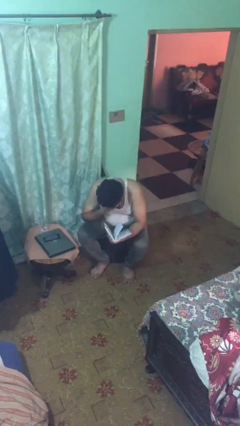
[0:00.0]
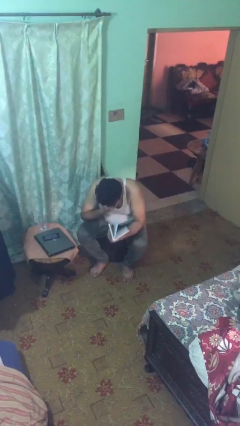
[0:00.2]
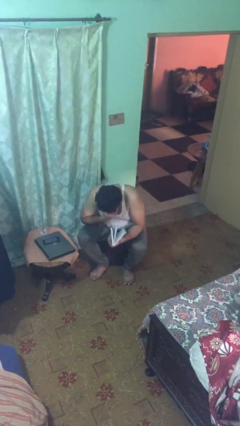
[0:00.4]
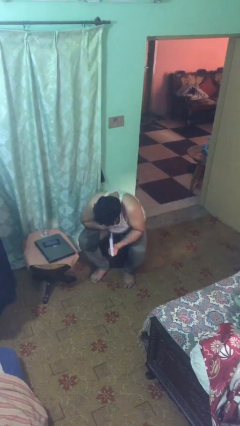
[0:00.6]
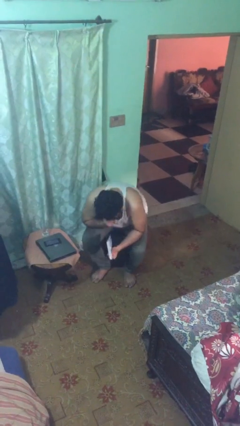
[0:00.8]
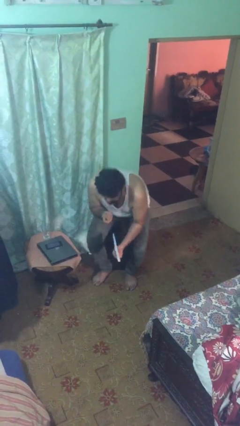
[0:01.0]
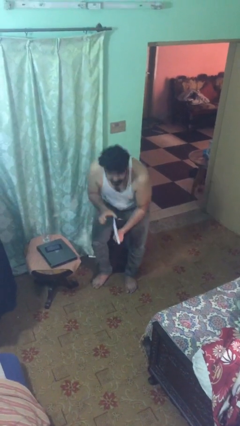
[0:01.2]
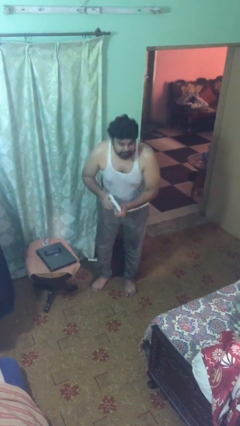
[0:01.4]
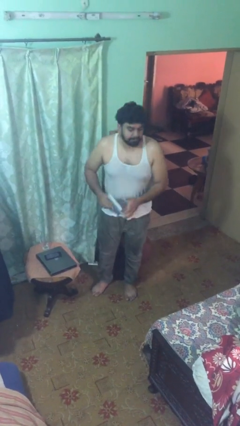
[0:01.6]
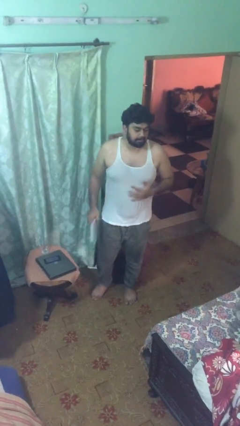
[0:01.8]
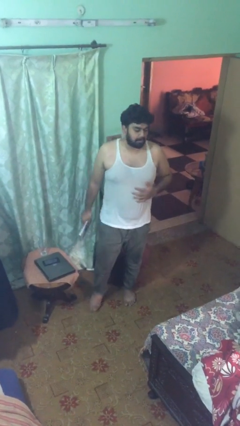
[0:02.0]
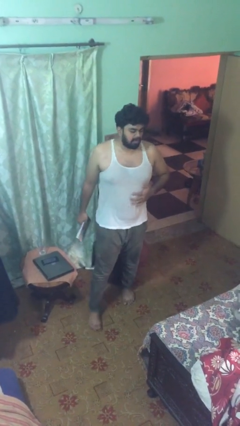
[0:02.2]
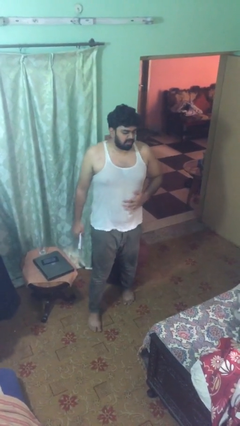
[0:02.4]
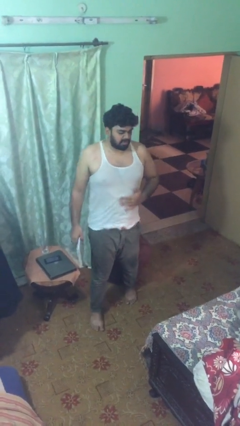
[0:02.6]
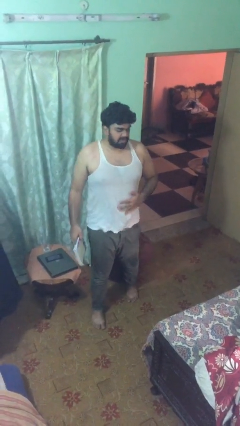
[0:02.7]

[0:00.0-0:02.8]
person stands up

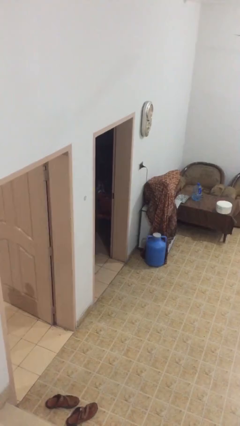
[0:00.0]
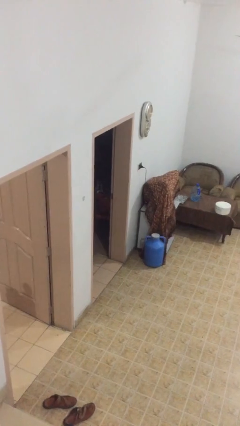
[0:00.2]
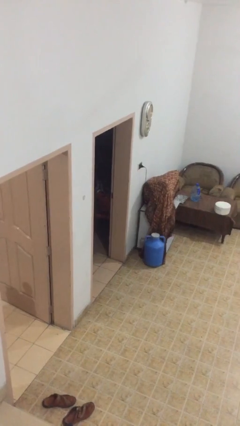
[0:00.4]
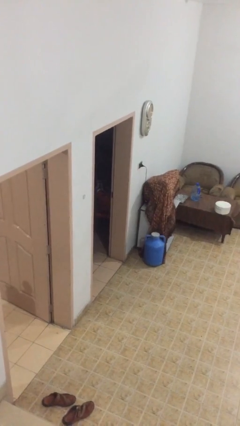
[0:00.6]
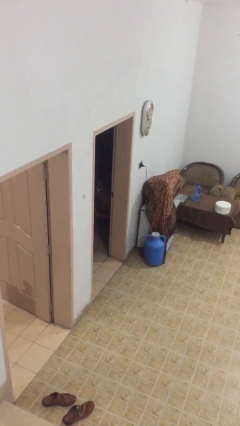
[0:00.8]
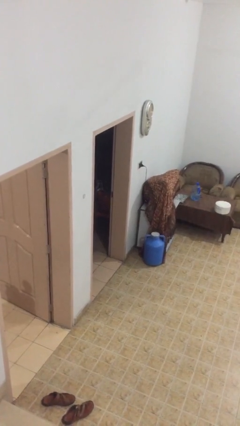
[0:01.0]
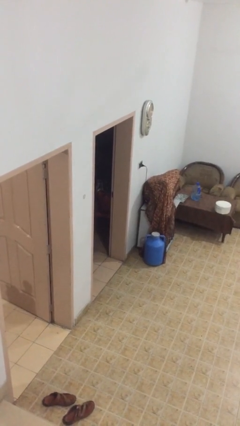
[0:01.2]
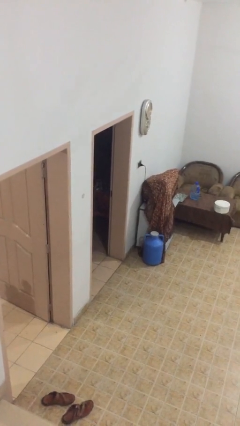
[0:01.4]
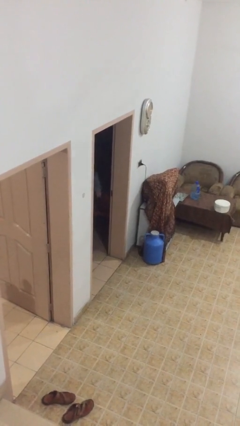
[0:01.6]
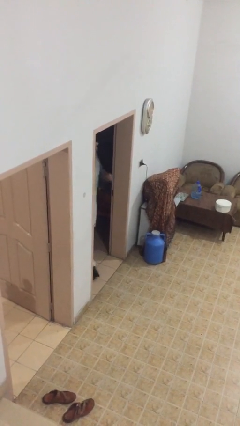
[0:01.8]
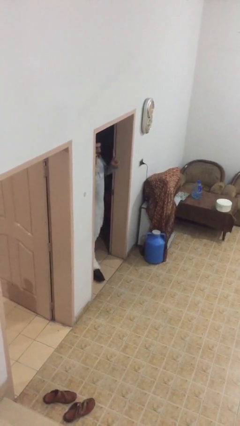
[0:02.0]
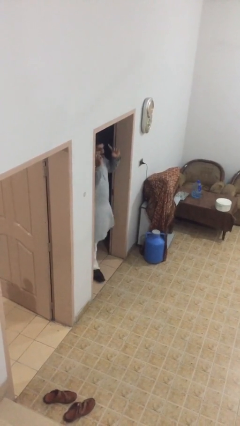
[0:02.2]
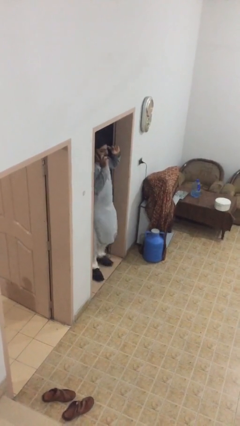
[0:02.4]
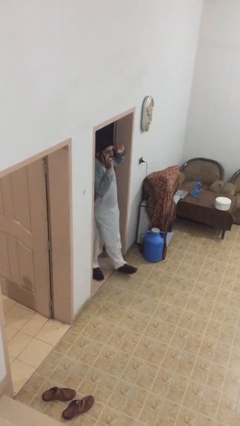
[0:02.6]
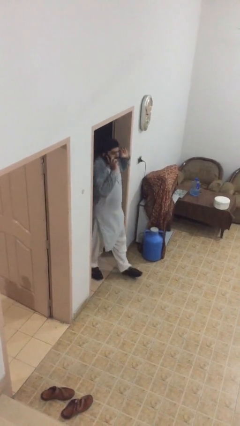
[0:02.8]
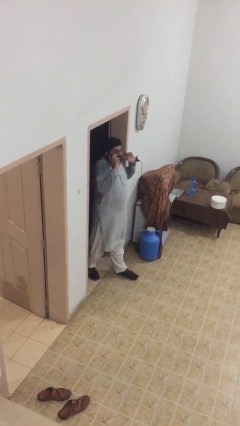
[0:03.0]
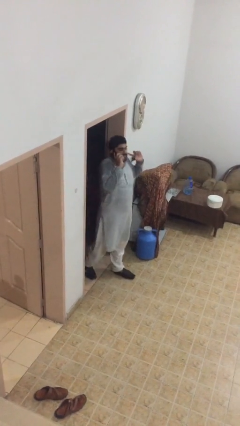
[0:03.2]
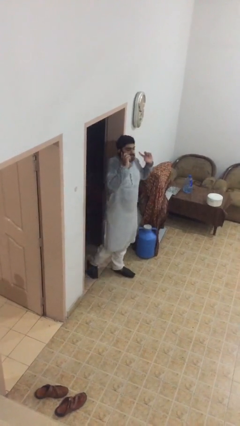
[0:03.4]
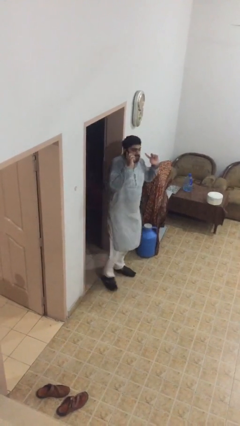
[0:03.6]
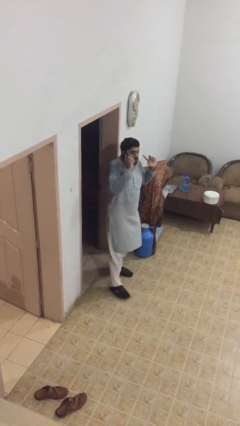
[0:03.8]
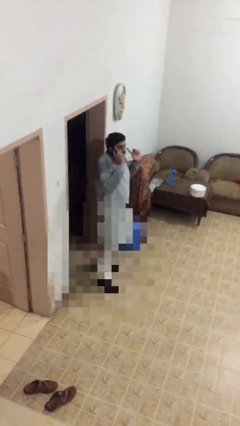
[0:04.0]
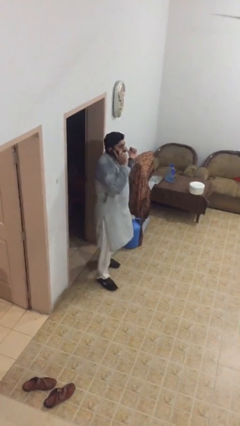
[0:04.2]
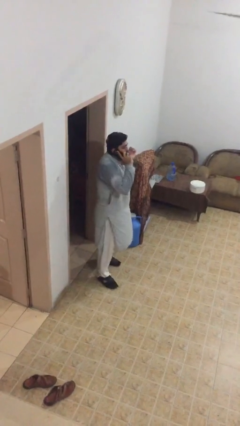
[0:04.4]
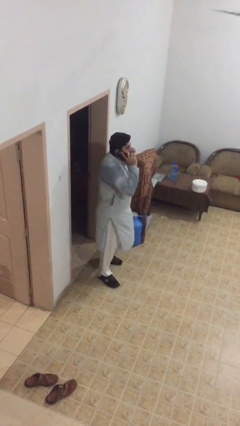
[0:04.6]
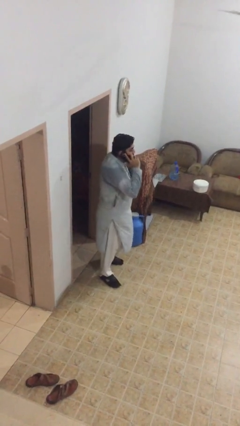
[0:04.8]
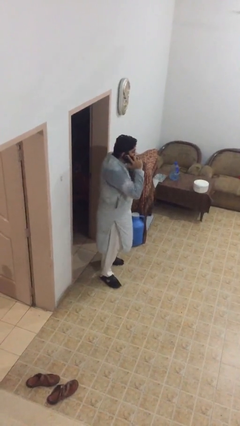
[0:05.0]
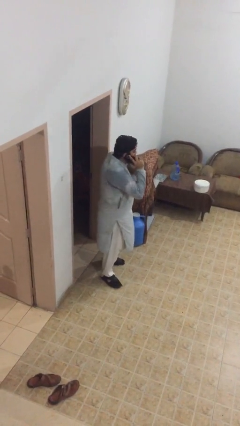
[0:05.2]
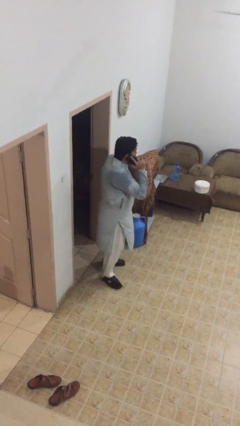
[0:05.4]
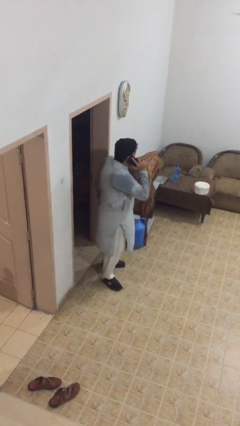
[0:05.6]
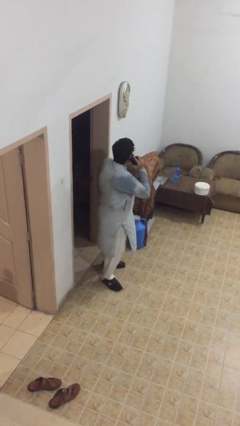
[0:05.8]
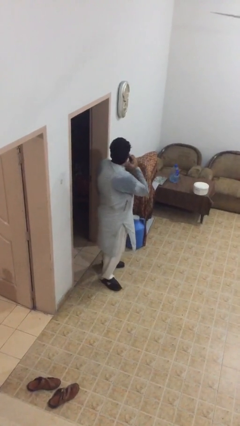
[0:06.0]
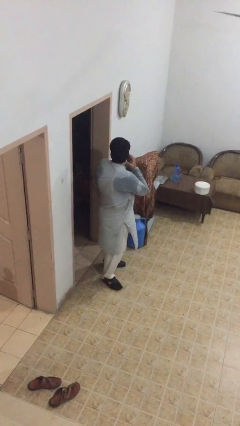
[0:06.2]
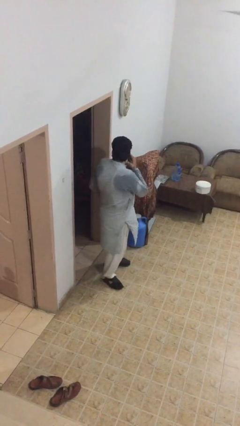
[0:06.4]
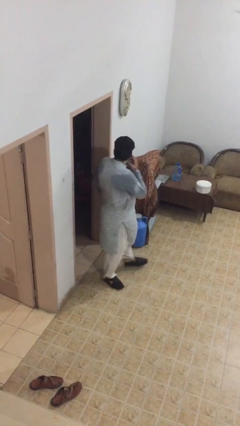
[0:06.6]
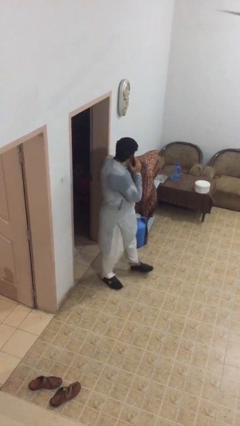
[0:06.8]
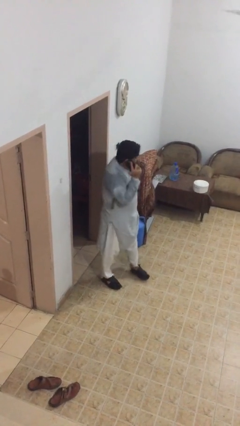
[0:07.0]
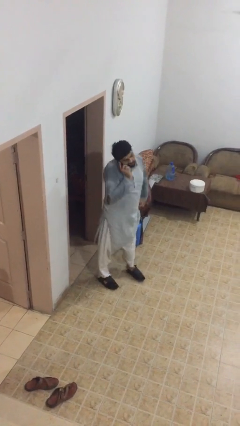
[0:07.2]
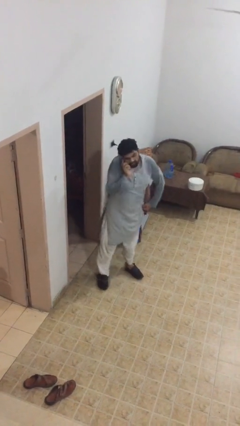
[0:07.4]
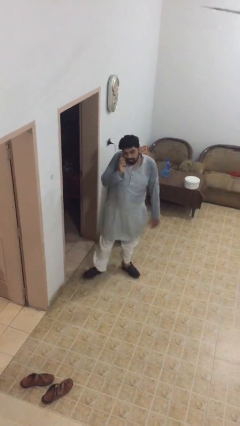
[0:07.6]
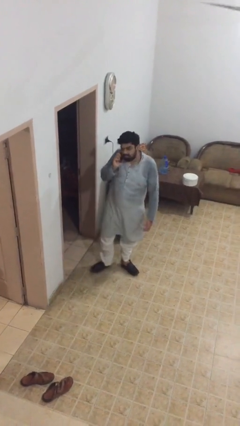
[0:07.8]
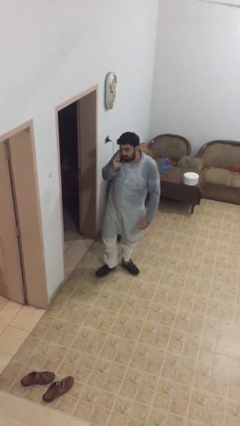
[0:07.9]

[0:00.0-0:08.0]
person enters scene through structure

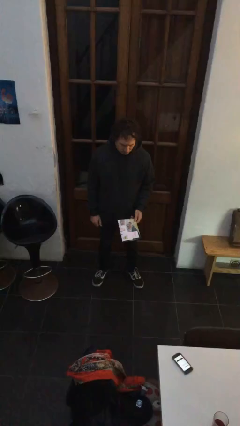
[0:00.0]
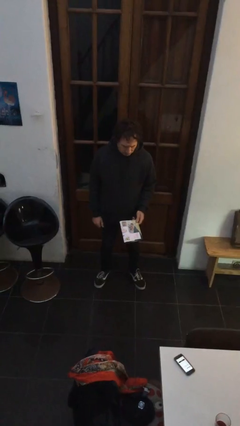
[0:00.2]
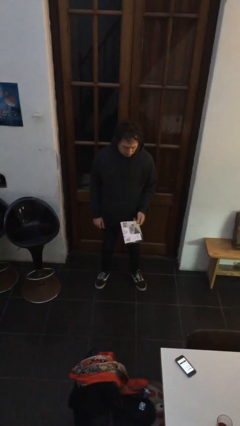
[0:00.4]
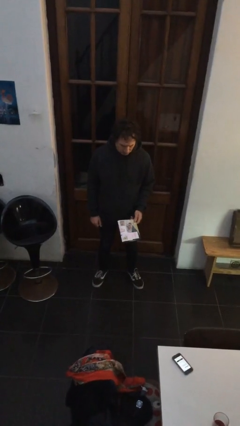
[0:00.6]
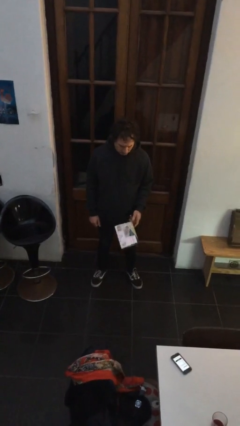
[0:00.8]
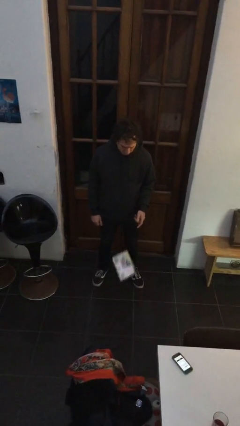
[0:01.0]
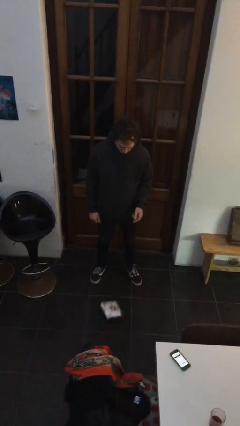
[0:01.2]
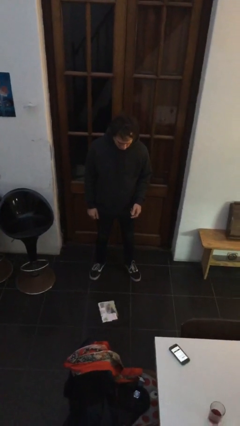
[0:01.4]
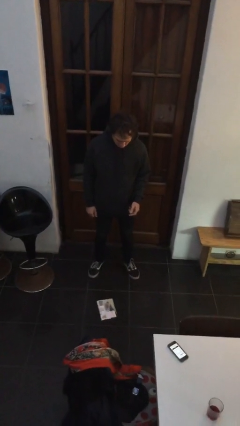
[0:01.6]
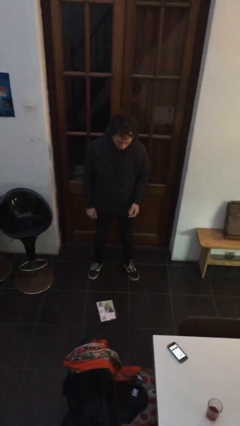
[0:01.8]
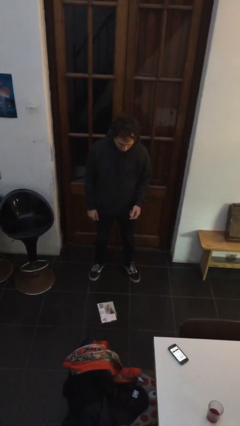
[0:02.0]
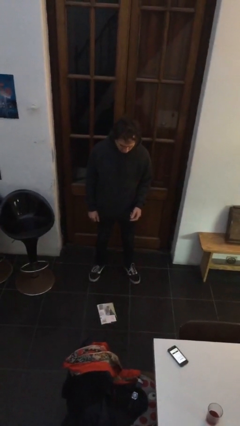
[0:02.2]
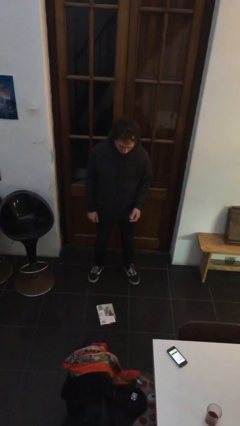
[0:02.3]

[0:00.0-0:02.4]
person drops object

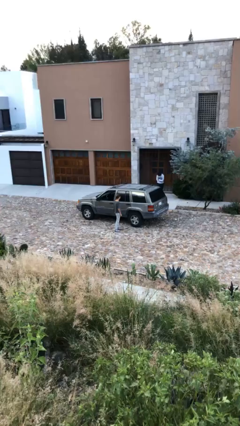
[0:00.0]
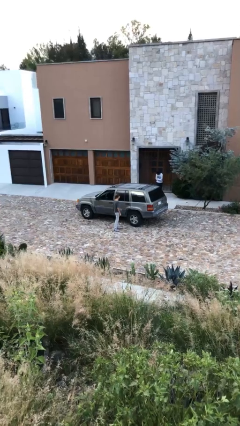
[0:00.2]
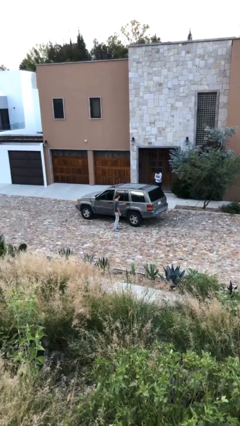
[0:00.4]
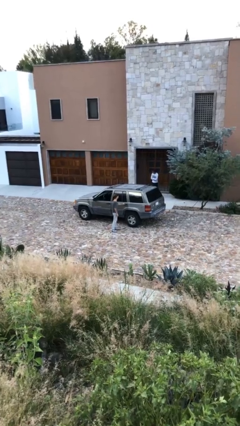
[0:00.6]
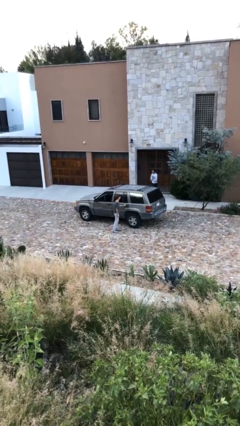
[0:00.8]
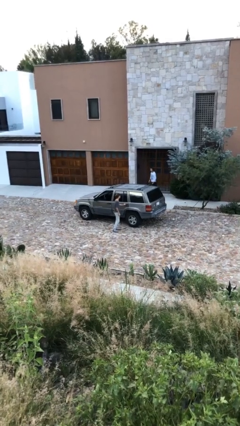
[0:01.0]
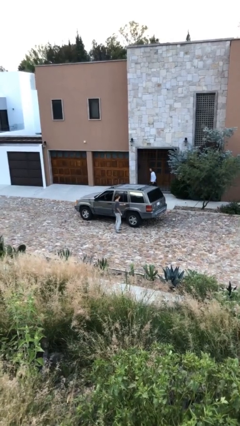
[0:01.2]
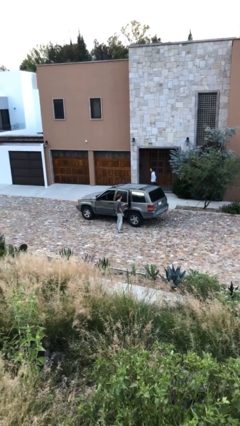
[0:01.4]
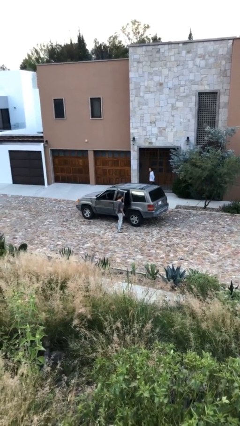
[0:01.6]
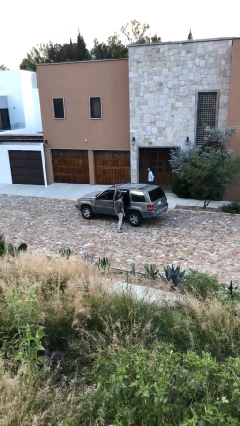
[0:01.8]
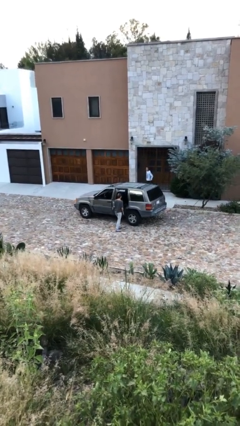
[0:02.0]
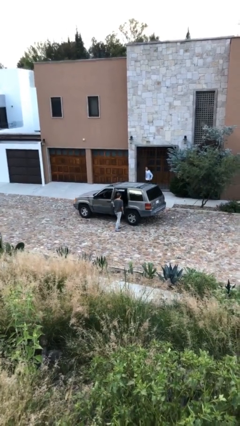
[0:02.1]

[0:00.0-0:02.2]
person opens car door

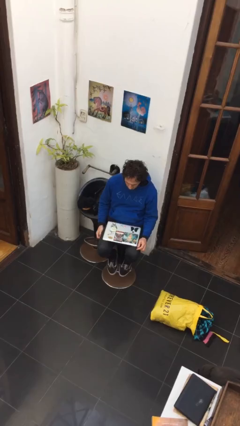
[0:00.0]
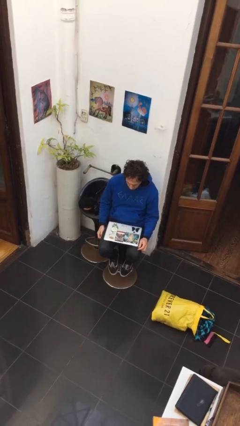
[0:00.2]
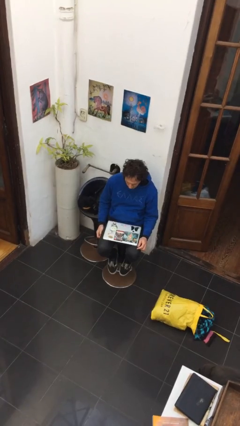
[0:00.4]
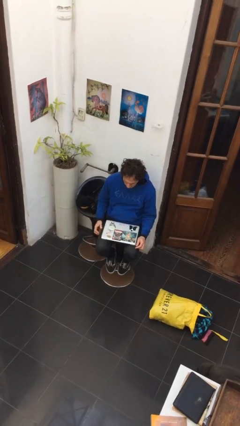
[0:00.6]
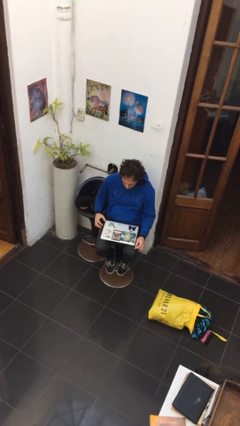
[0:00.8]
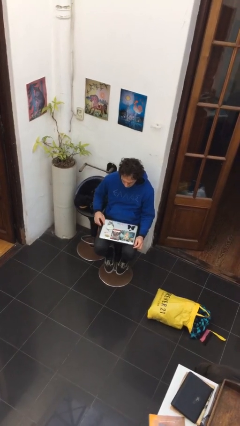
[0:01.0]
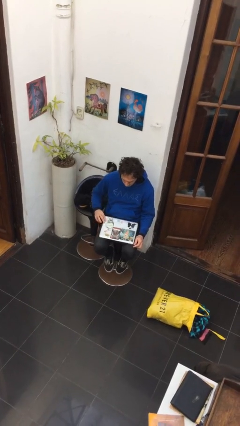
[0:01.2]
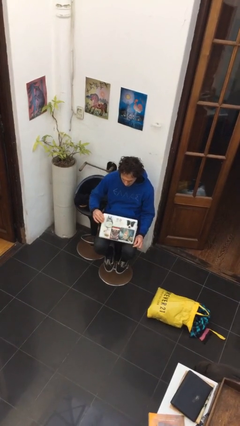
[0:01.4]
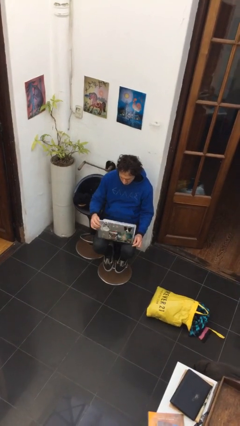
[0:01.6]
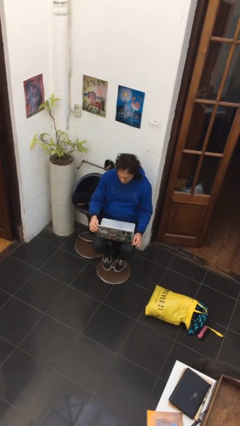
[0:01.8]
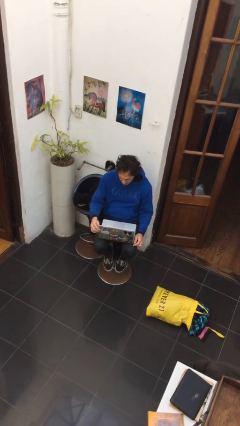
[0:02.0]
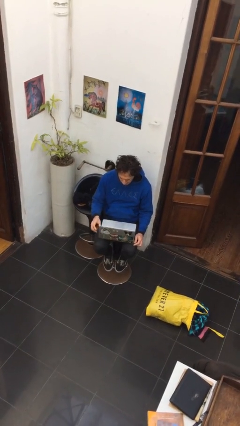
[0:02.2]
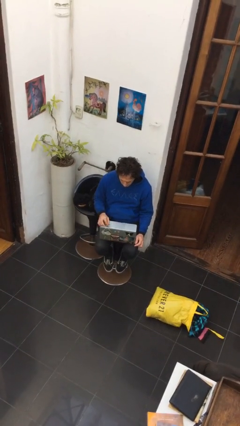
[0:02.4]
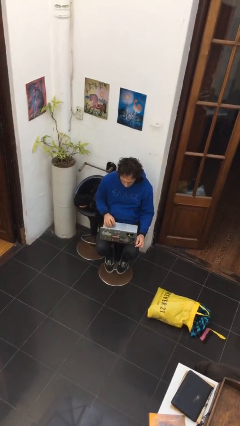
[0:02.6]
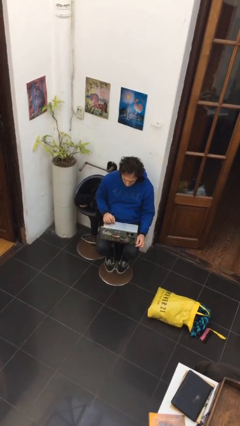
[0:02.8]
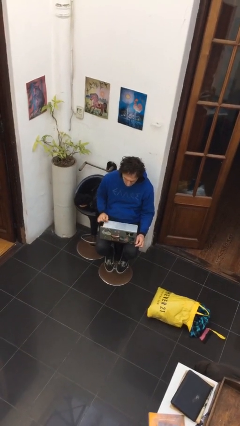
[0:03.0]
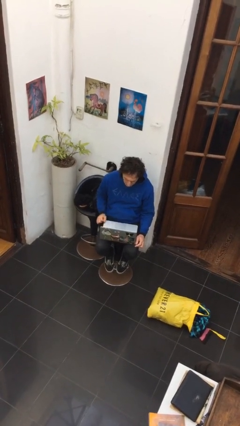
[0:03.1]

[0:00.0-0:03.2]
person opens laptop
